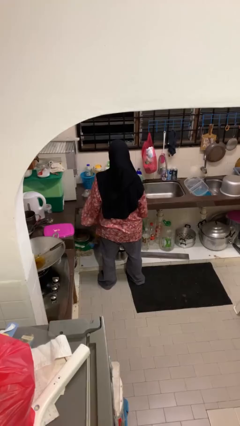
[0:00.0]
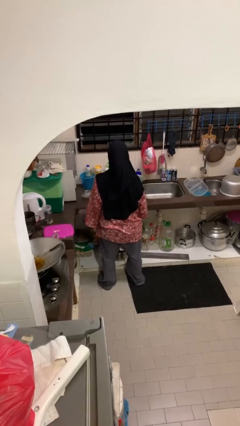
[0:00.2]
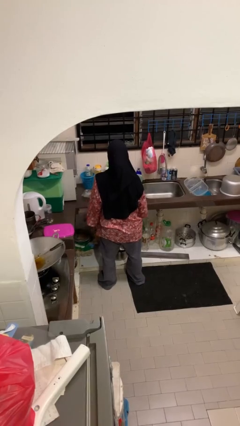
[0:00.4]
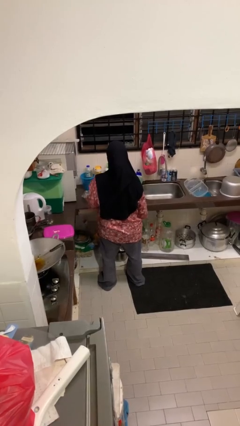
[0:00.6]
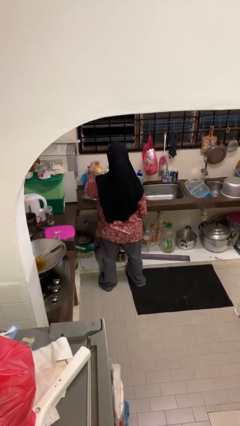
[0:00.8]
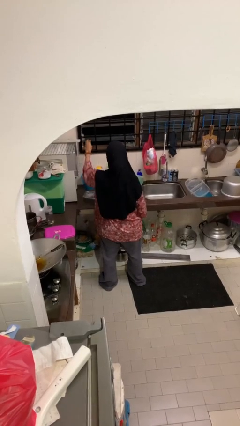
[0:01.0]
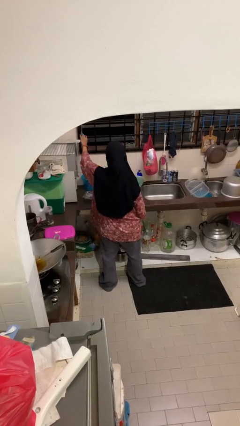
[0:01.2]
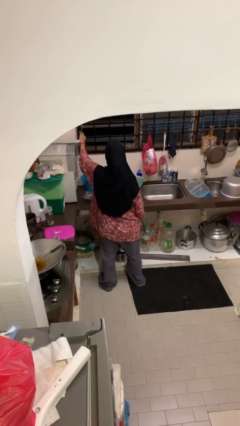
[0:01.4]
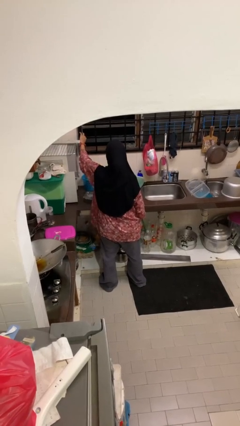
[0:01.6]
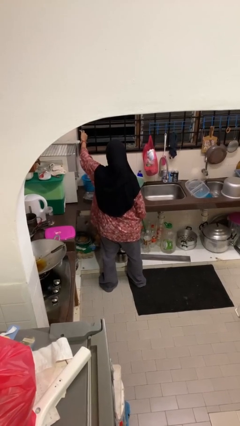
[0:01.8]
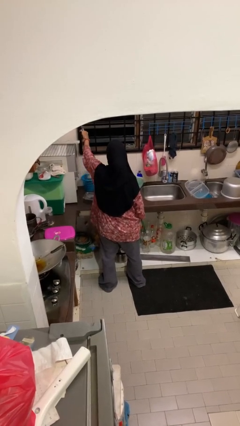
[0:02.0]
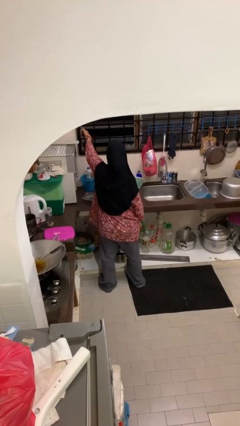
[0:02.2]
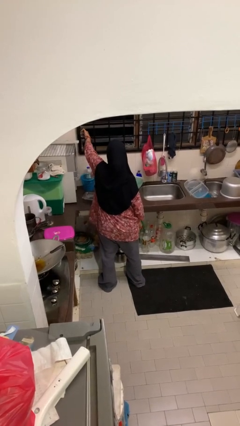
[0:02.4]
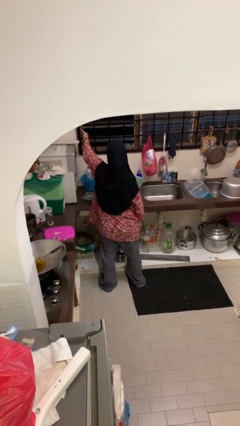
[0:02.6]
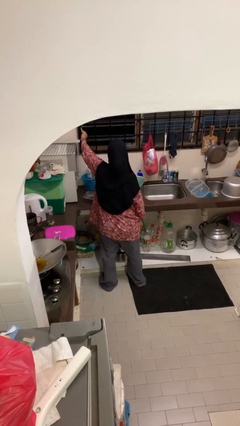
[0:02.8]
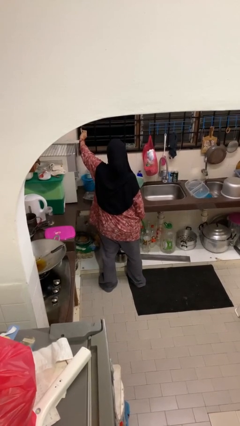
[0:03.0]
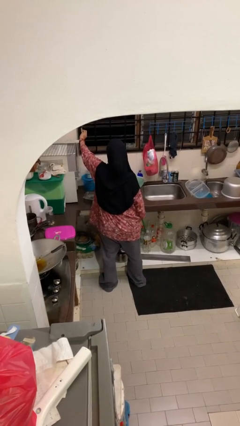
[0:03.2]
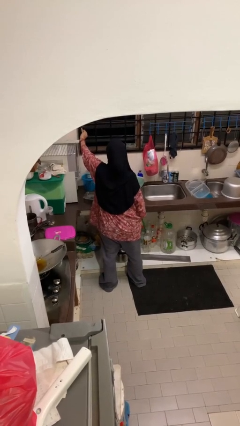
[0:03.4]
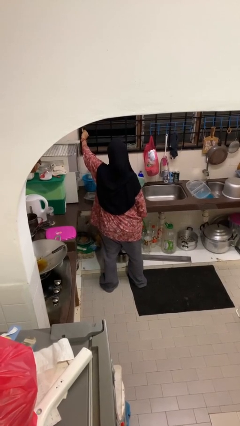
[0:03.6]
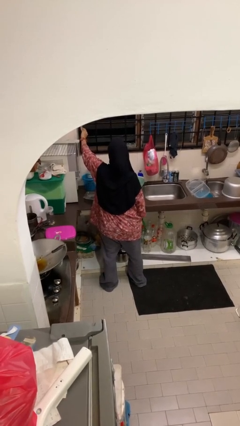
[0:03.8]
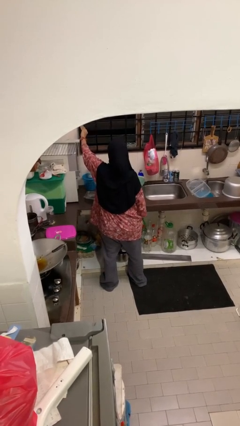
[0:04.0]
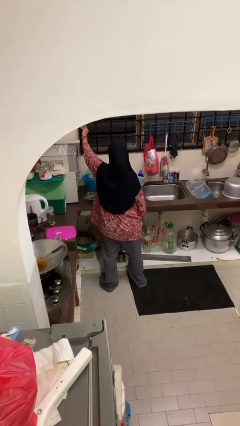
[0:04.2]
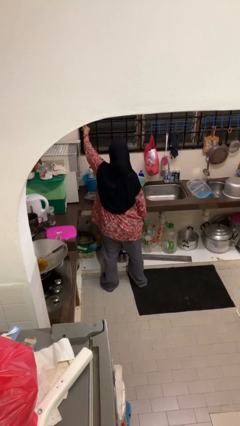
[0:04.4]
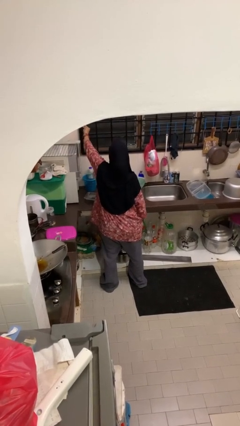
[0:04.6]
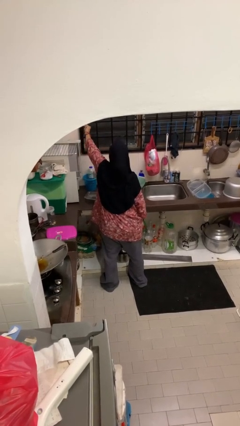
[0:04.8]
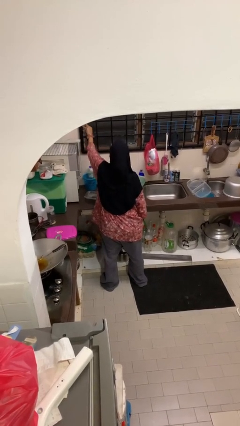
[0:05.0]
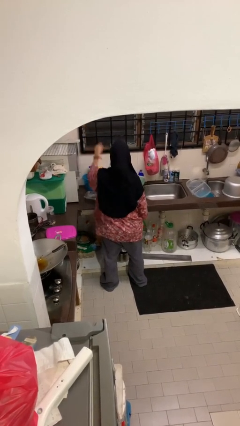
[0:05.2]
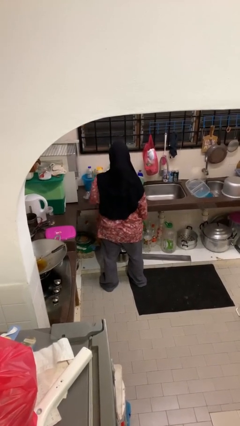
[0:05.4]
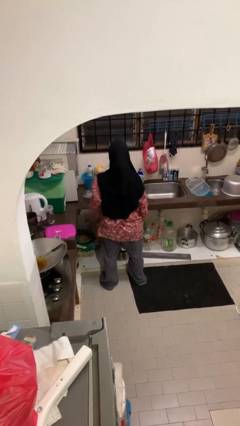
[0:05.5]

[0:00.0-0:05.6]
person closes home window

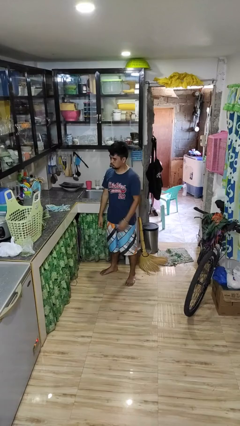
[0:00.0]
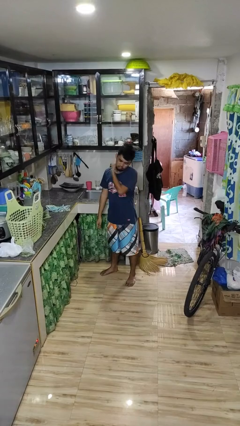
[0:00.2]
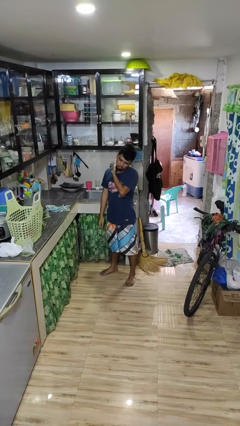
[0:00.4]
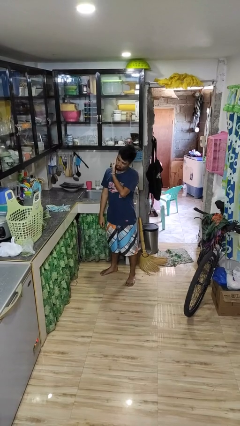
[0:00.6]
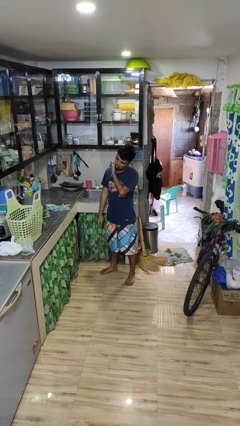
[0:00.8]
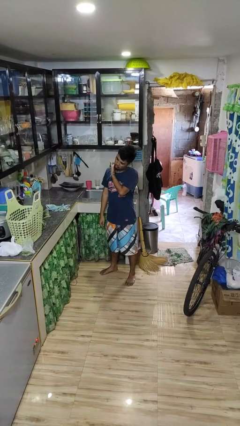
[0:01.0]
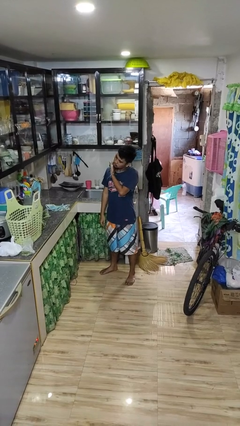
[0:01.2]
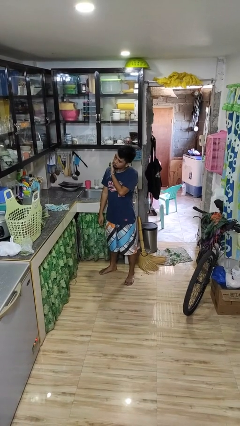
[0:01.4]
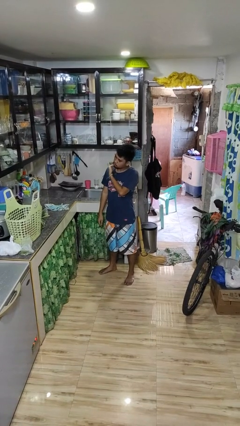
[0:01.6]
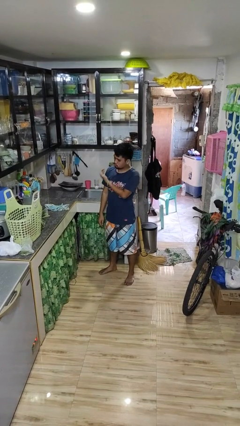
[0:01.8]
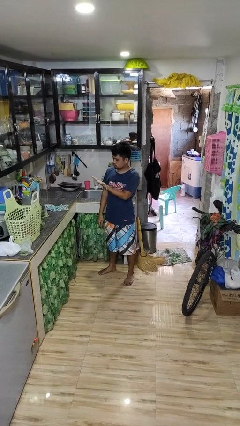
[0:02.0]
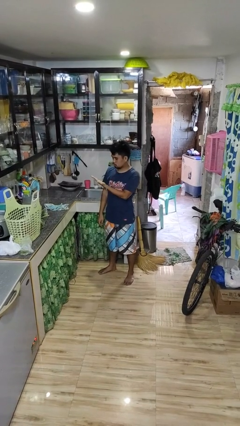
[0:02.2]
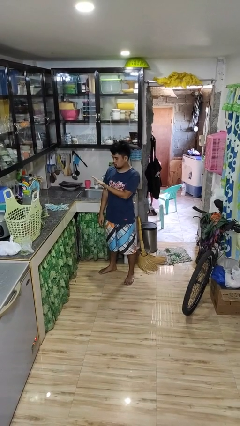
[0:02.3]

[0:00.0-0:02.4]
person swats bug

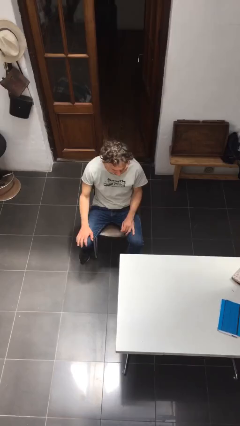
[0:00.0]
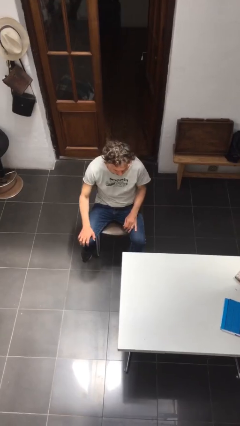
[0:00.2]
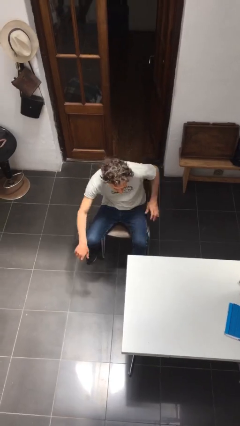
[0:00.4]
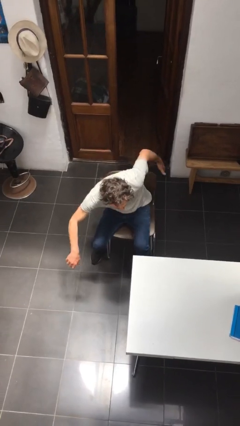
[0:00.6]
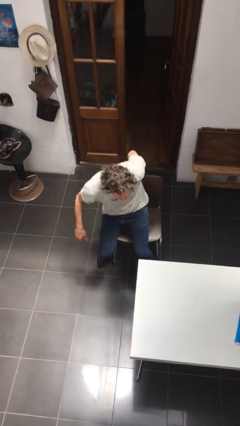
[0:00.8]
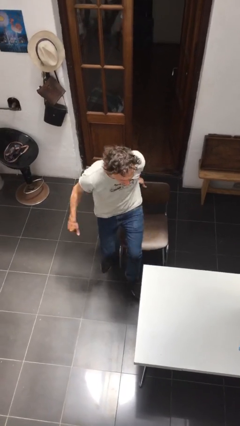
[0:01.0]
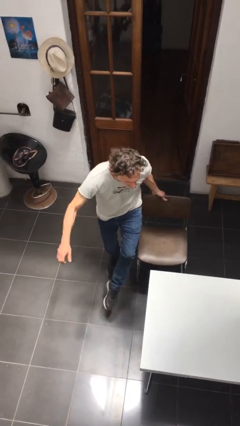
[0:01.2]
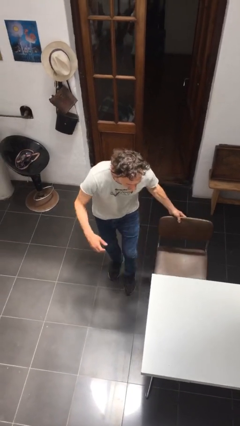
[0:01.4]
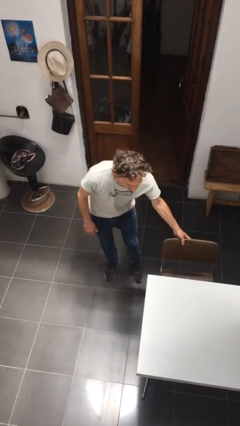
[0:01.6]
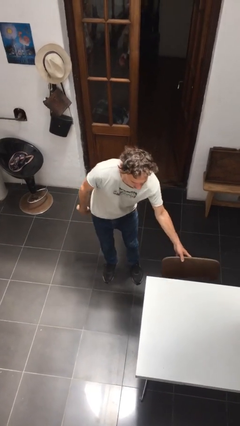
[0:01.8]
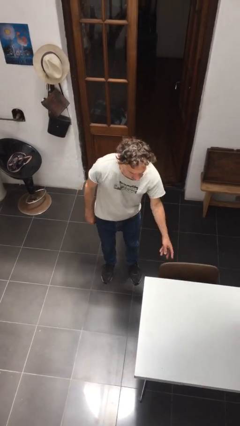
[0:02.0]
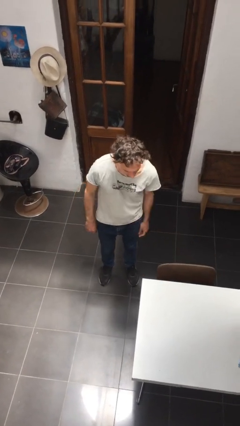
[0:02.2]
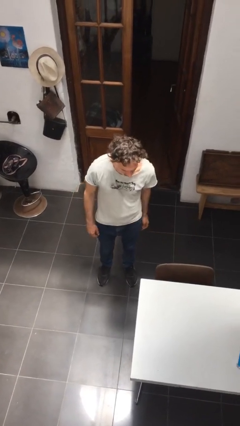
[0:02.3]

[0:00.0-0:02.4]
person stands up

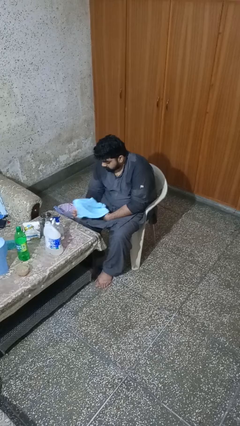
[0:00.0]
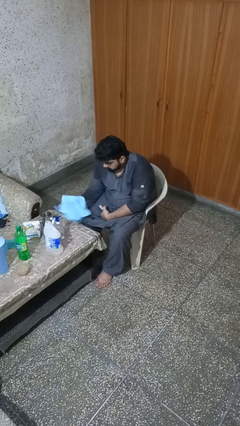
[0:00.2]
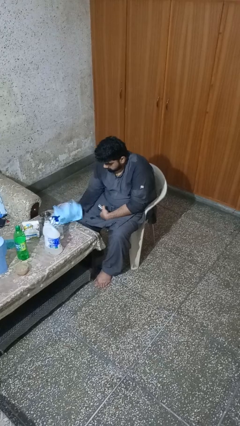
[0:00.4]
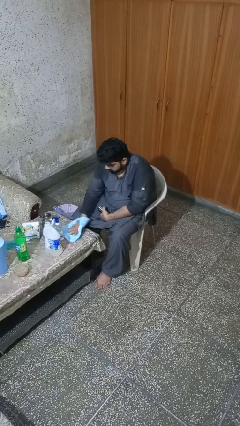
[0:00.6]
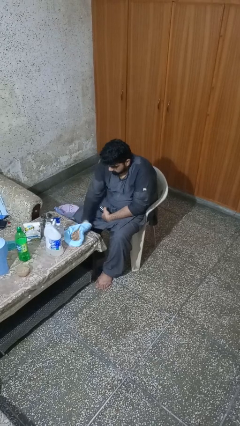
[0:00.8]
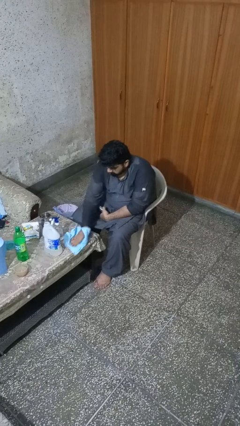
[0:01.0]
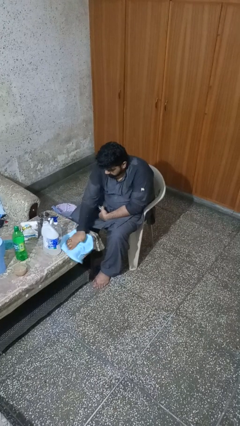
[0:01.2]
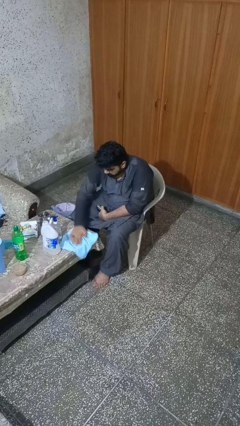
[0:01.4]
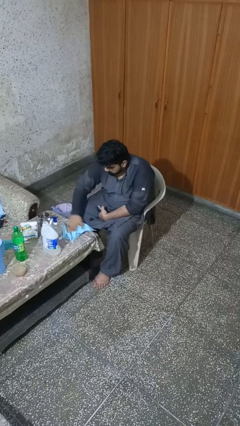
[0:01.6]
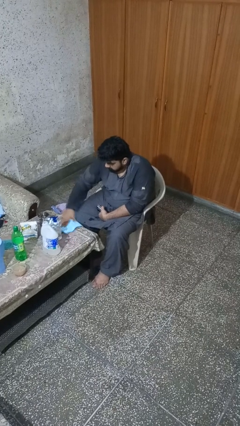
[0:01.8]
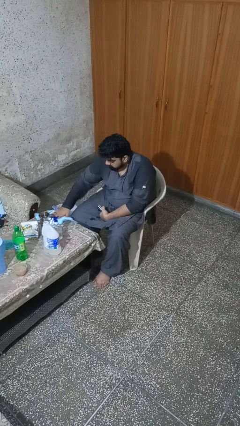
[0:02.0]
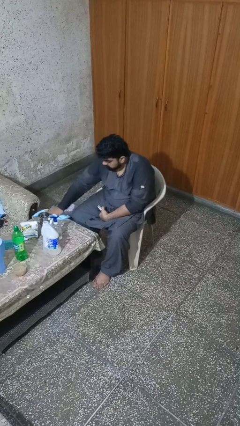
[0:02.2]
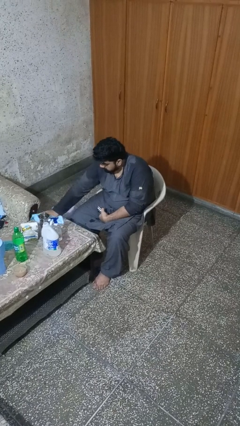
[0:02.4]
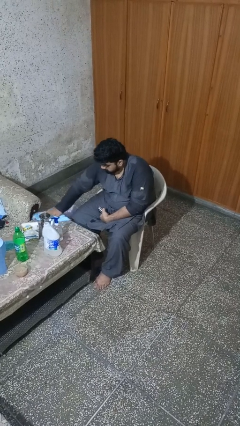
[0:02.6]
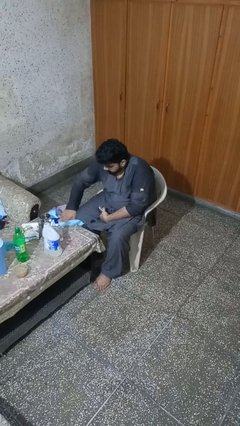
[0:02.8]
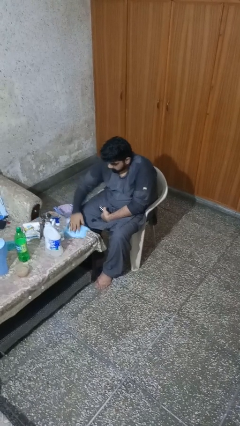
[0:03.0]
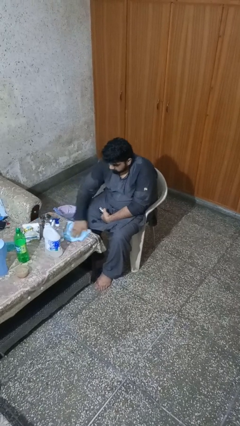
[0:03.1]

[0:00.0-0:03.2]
person cleans table with rag

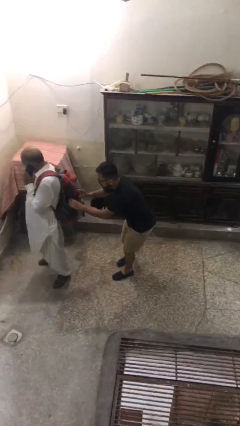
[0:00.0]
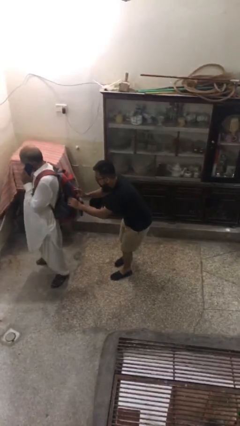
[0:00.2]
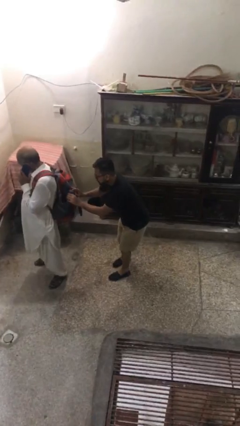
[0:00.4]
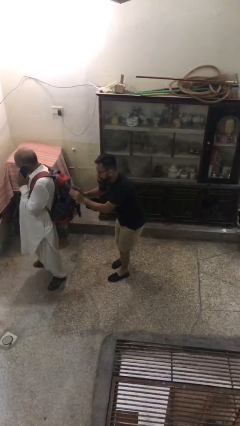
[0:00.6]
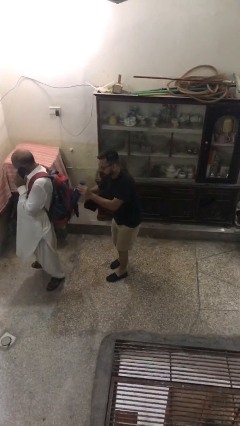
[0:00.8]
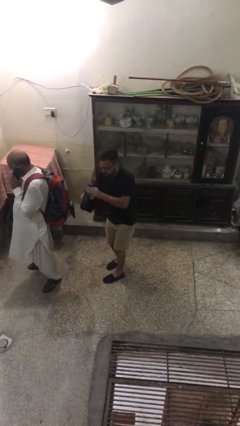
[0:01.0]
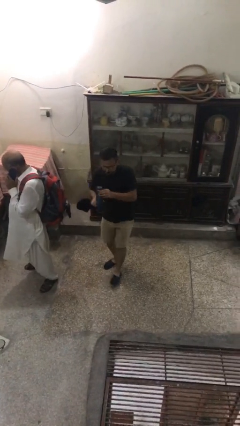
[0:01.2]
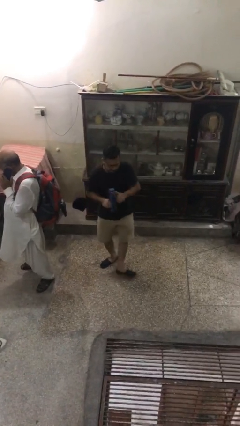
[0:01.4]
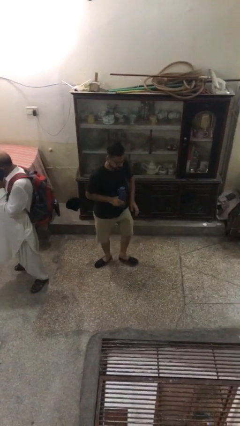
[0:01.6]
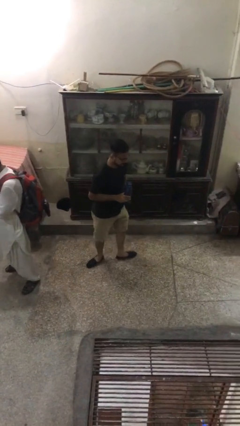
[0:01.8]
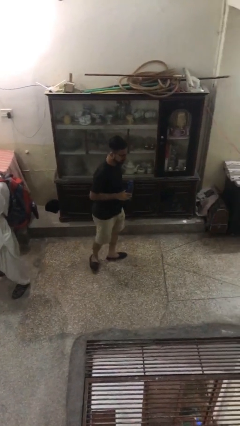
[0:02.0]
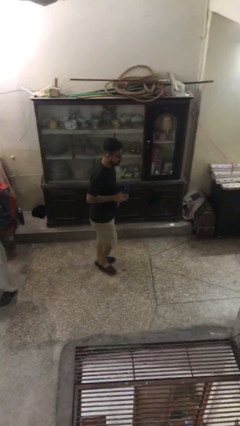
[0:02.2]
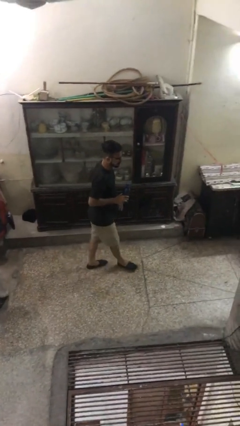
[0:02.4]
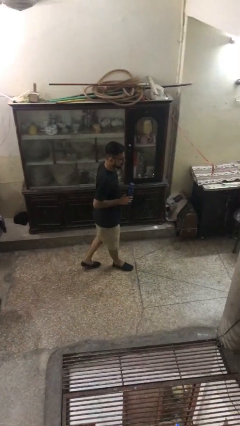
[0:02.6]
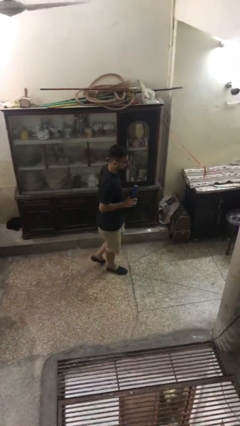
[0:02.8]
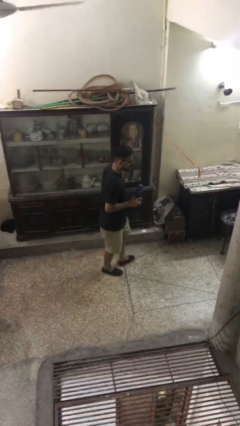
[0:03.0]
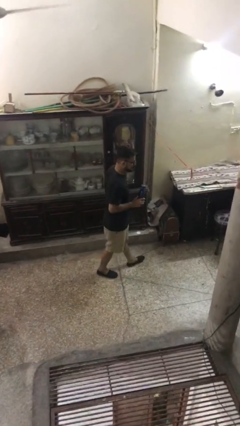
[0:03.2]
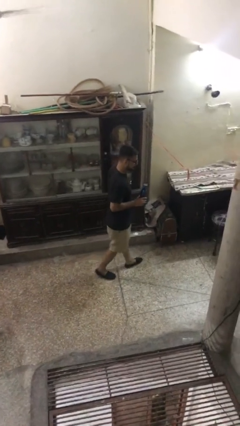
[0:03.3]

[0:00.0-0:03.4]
person steals object from person

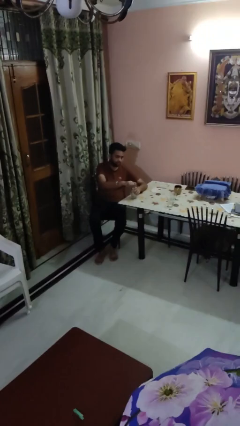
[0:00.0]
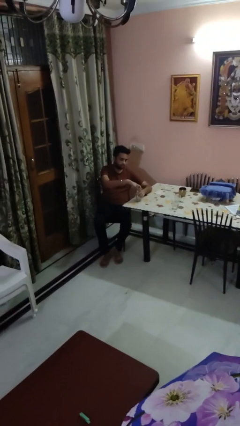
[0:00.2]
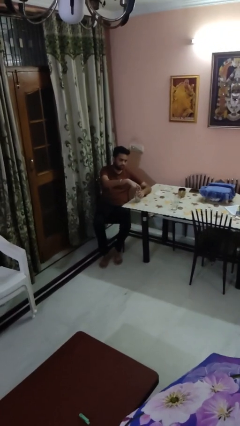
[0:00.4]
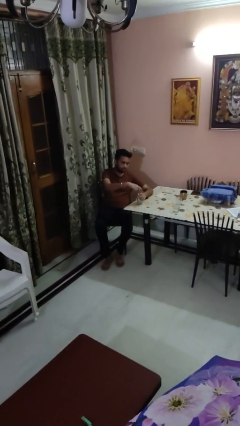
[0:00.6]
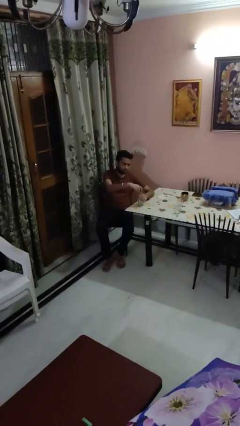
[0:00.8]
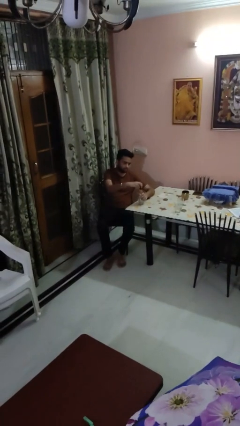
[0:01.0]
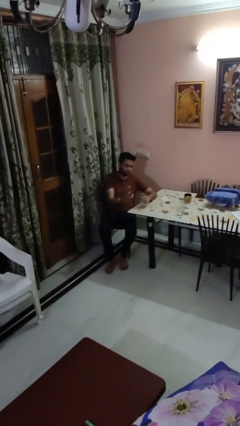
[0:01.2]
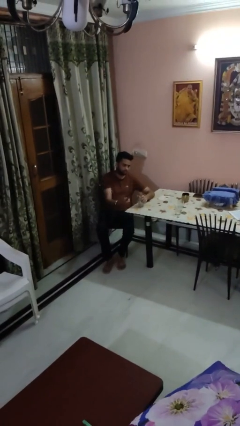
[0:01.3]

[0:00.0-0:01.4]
person unscrews lid from bottle
